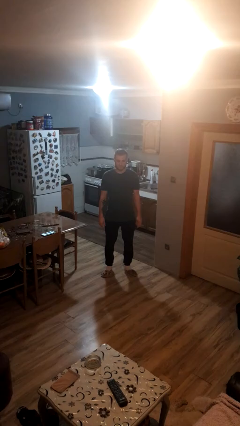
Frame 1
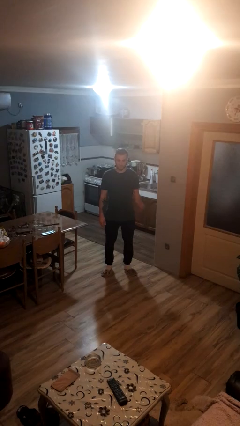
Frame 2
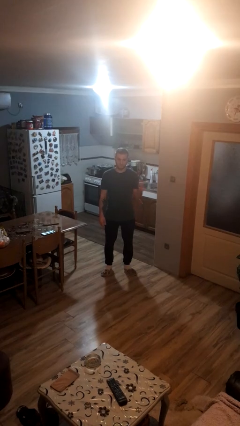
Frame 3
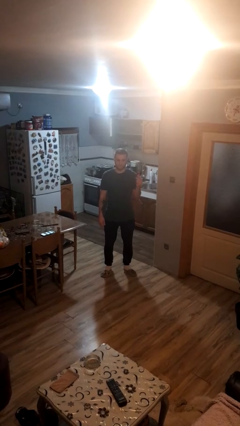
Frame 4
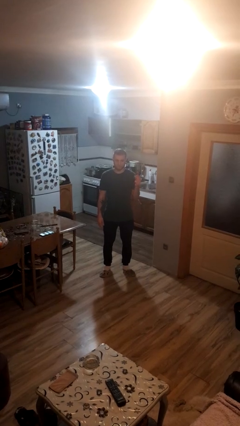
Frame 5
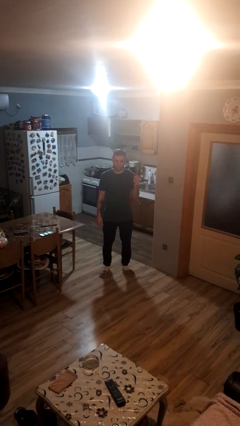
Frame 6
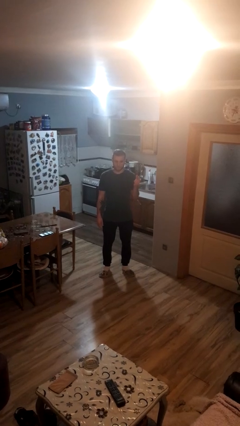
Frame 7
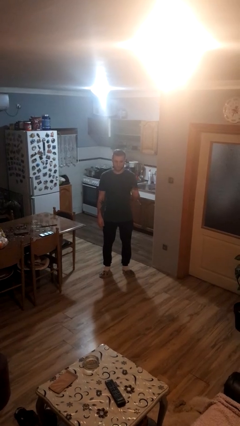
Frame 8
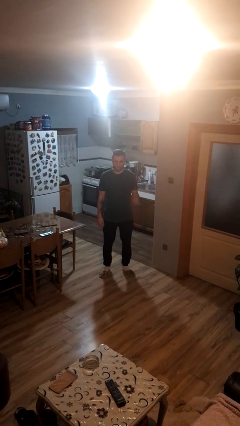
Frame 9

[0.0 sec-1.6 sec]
person snaps fingers

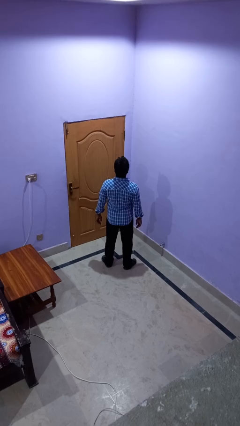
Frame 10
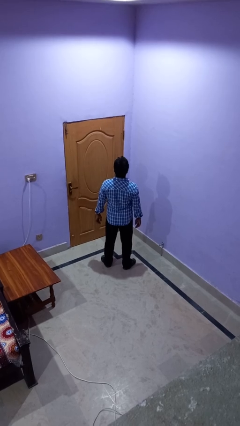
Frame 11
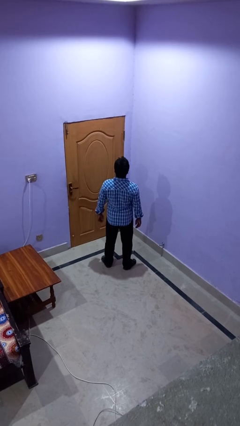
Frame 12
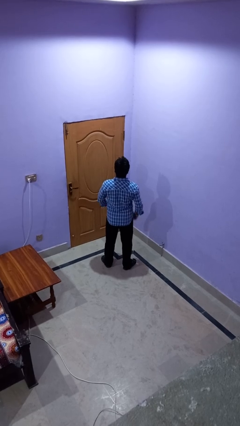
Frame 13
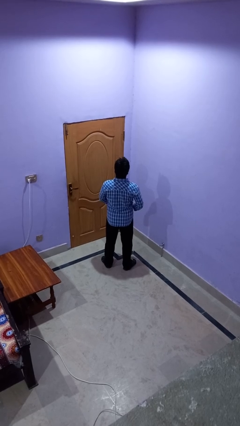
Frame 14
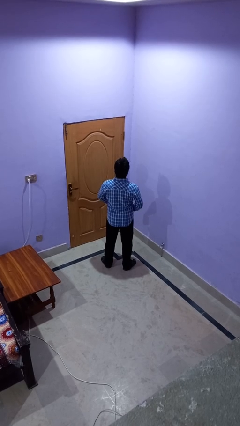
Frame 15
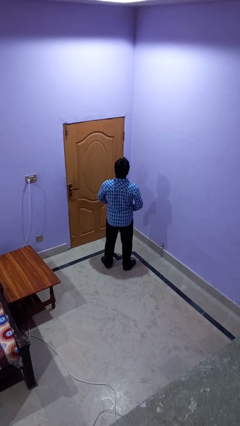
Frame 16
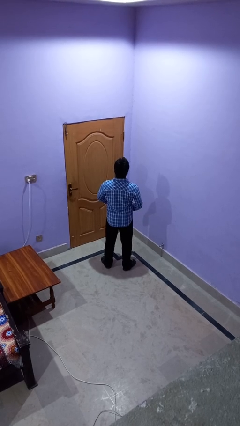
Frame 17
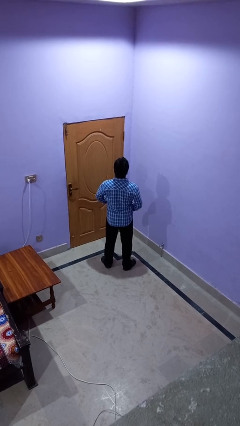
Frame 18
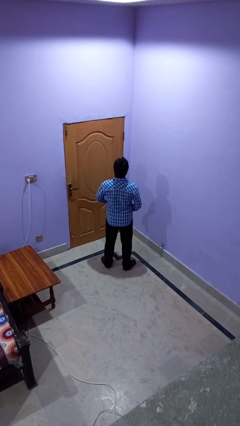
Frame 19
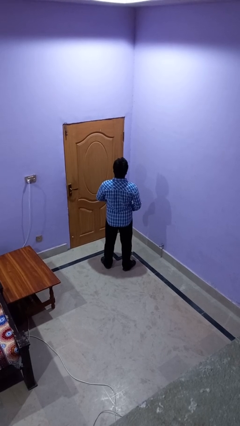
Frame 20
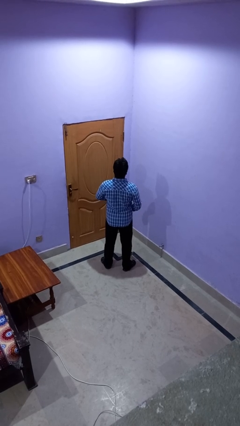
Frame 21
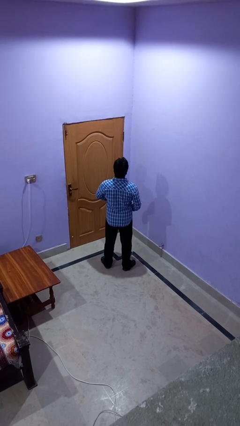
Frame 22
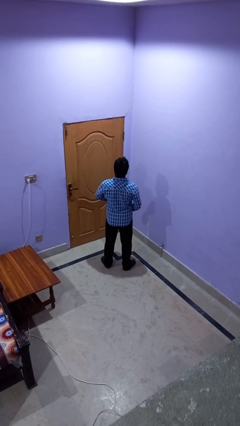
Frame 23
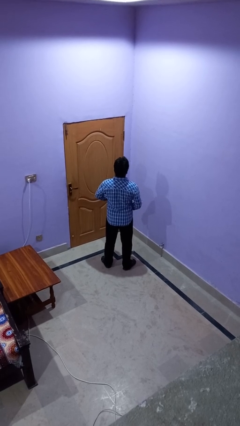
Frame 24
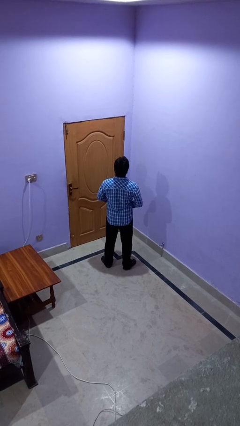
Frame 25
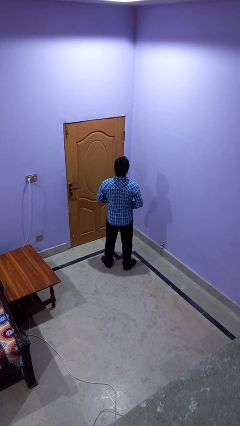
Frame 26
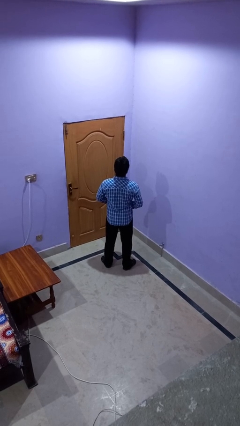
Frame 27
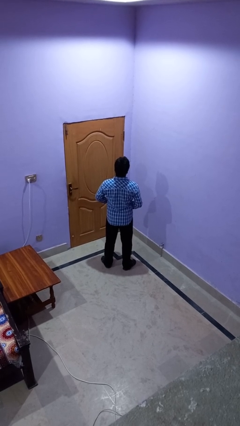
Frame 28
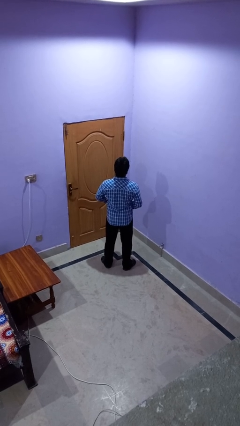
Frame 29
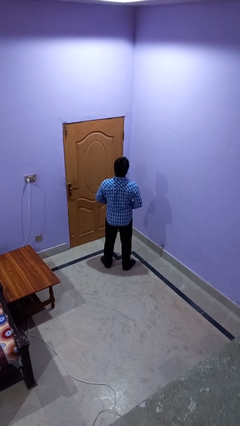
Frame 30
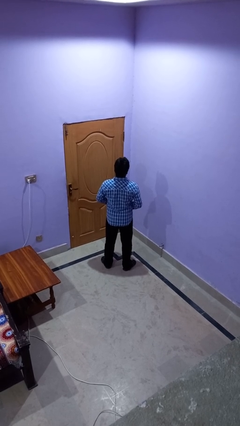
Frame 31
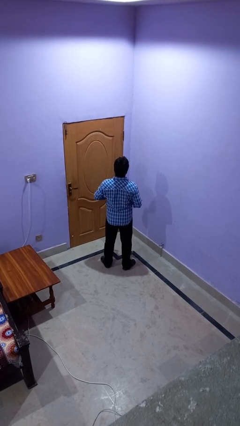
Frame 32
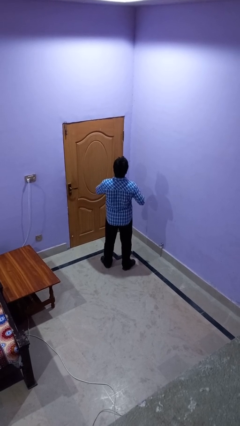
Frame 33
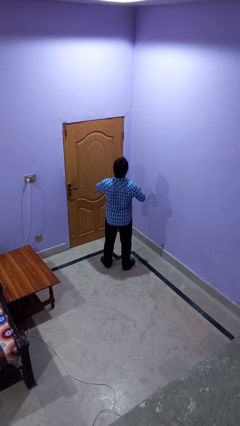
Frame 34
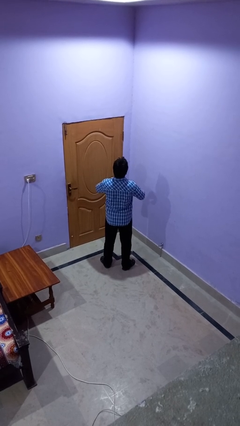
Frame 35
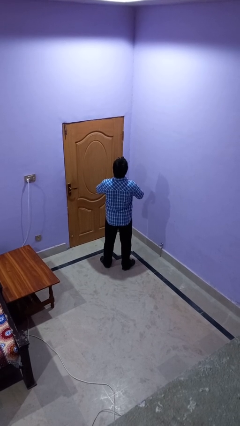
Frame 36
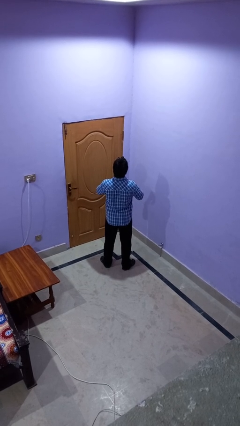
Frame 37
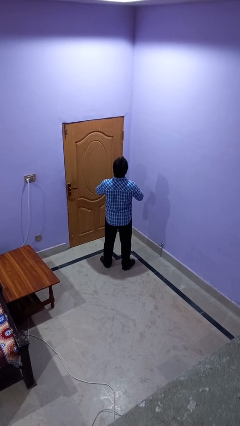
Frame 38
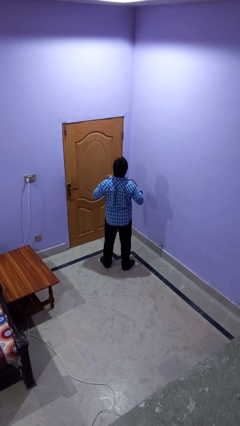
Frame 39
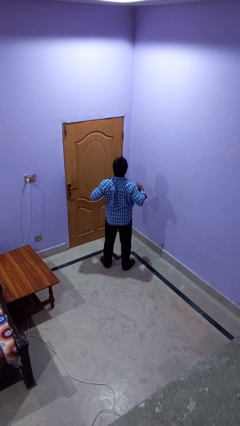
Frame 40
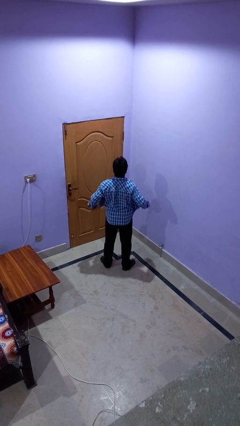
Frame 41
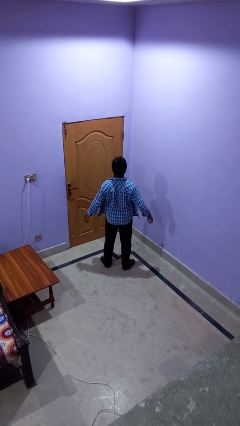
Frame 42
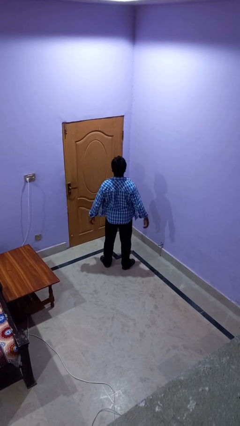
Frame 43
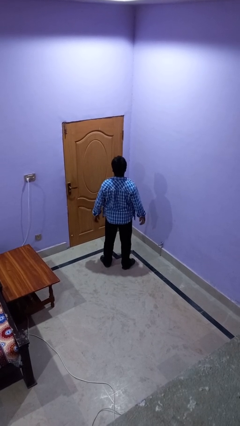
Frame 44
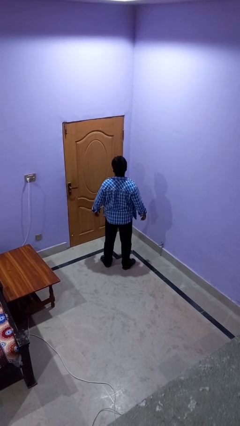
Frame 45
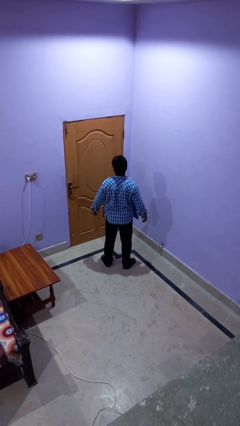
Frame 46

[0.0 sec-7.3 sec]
person unbuttons shirt

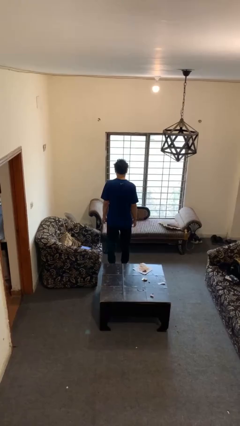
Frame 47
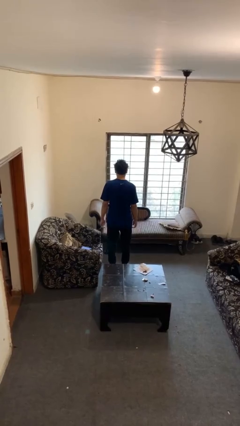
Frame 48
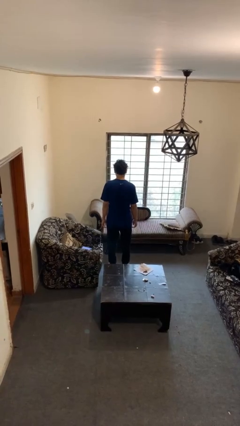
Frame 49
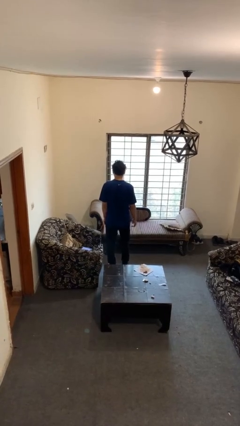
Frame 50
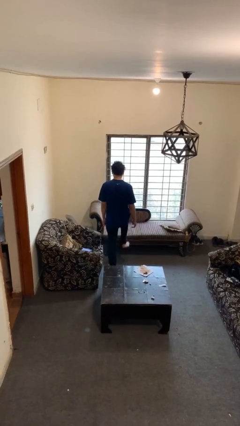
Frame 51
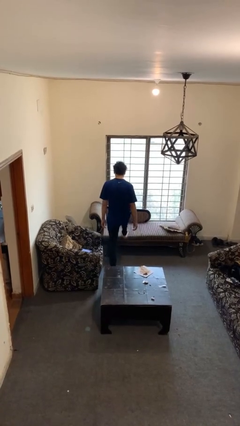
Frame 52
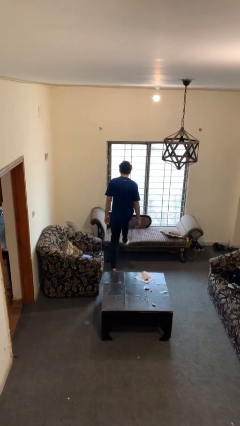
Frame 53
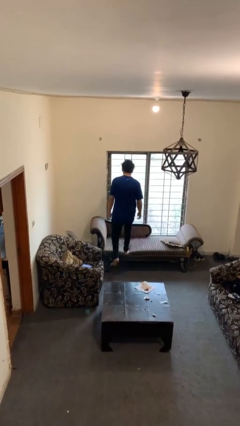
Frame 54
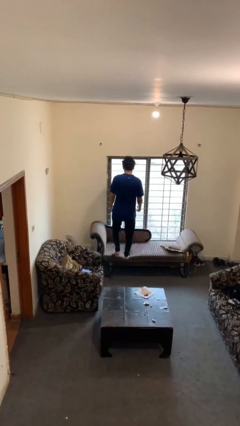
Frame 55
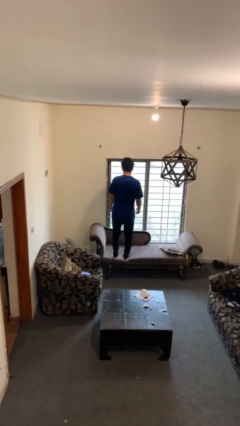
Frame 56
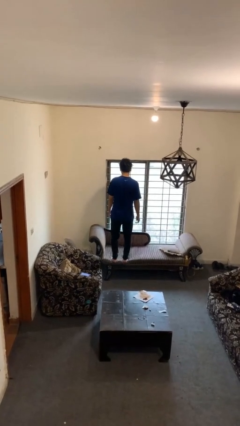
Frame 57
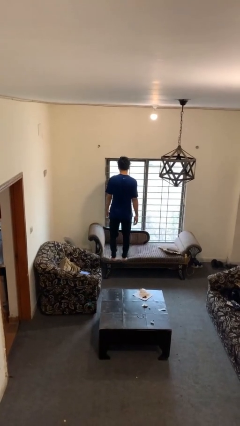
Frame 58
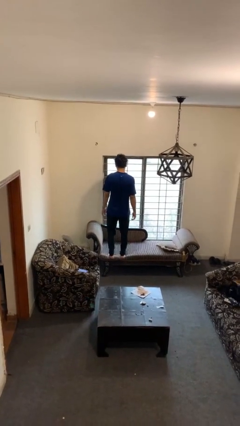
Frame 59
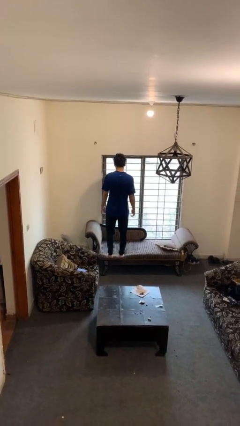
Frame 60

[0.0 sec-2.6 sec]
person climbs on couch

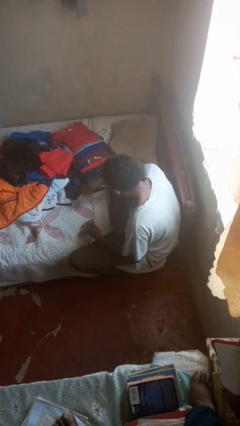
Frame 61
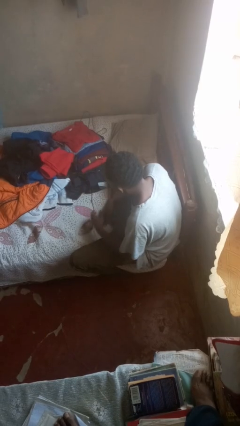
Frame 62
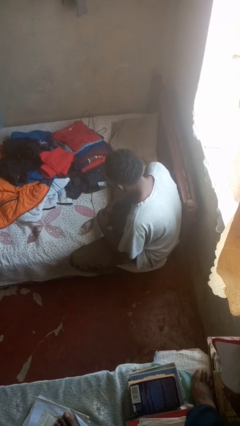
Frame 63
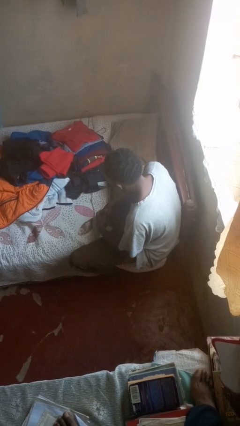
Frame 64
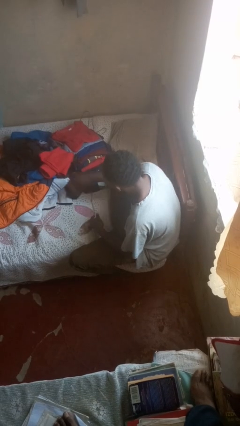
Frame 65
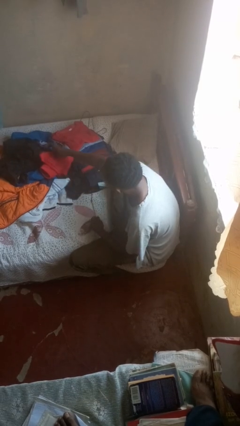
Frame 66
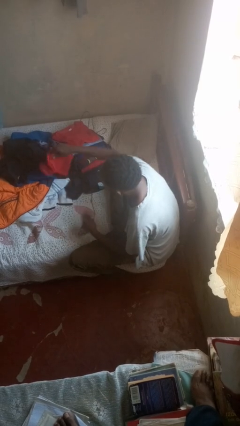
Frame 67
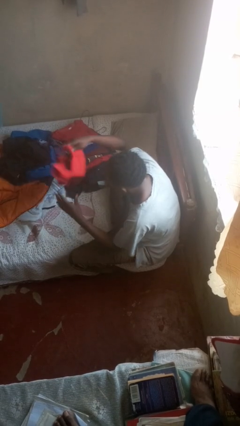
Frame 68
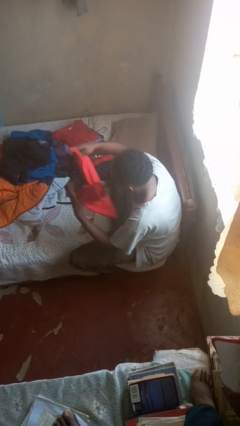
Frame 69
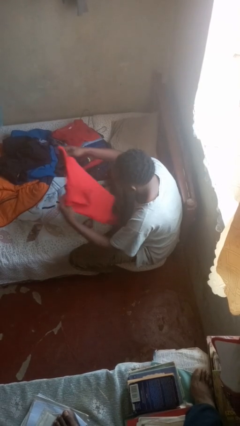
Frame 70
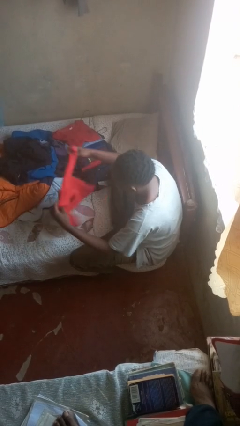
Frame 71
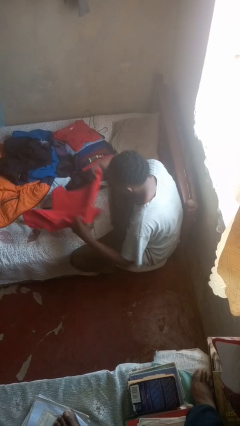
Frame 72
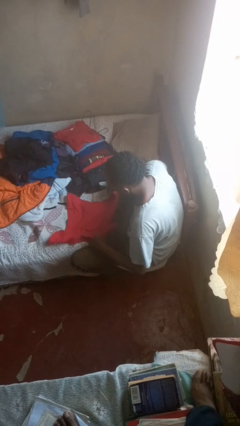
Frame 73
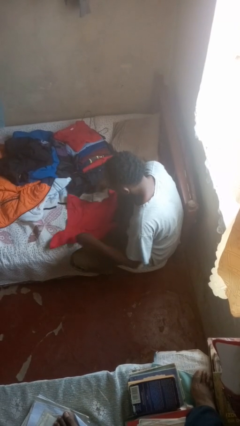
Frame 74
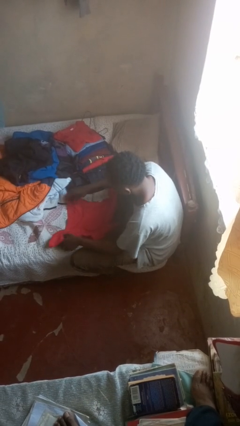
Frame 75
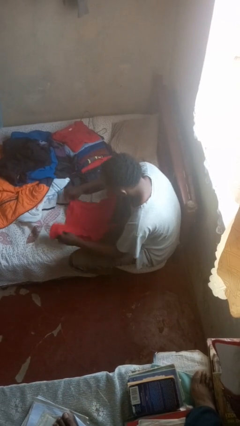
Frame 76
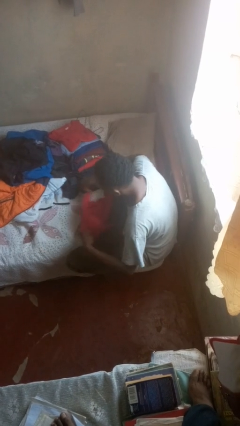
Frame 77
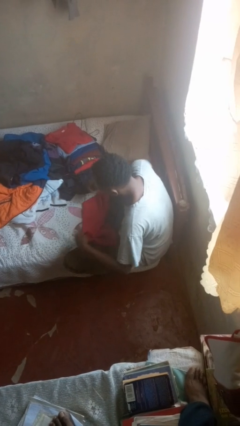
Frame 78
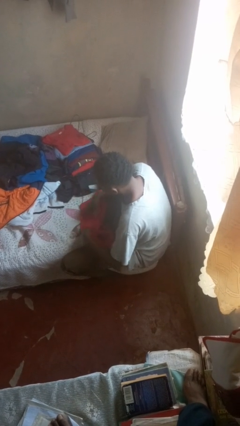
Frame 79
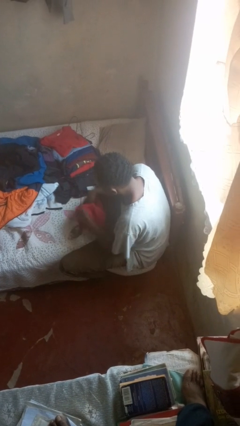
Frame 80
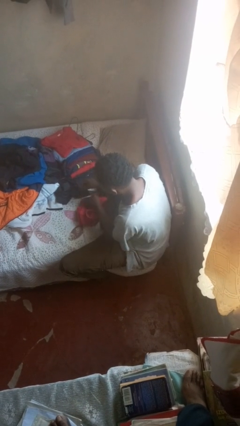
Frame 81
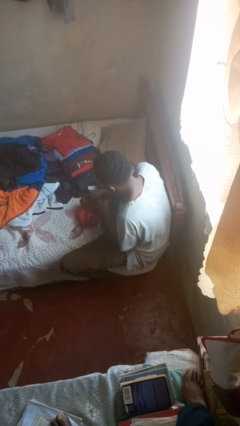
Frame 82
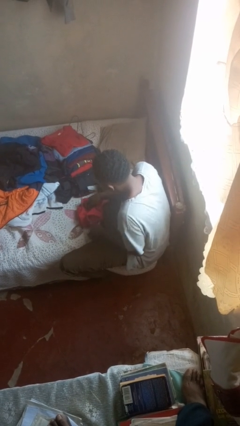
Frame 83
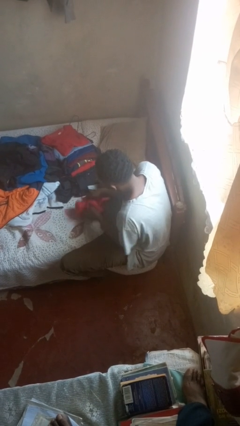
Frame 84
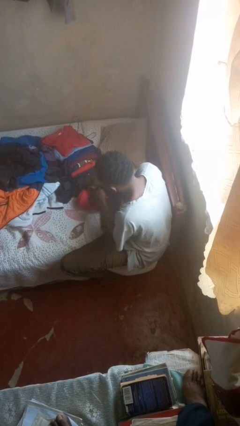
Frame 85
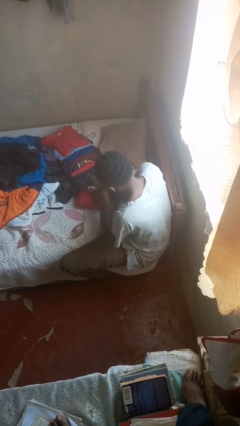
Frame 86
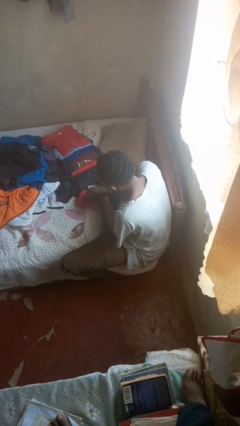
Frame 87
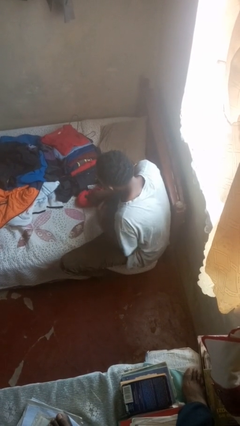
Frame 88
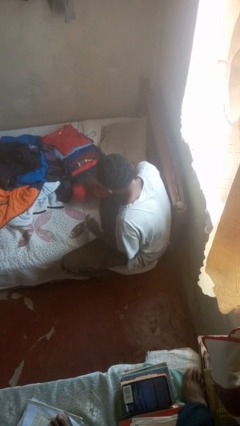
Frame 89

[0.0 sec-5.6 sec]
person folds shirt

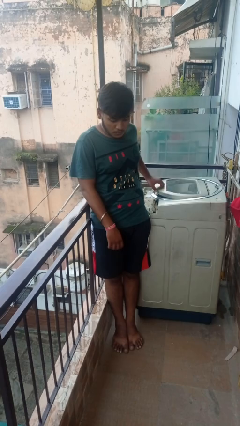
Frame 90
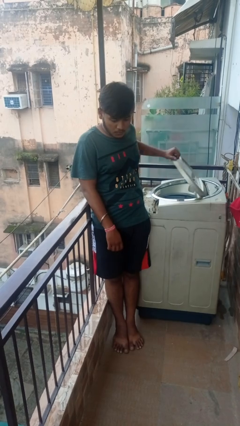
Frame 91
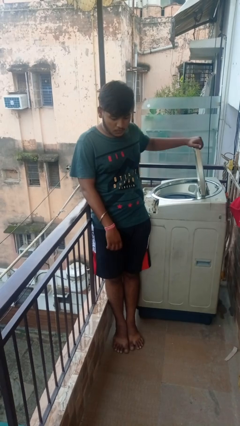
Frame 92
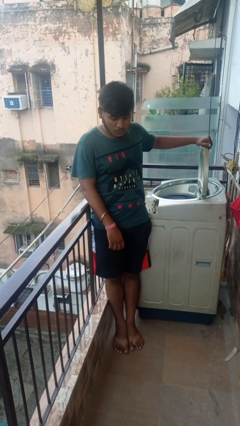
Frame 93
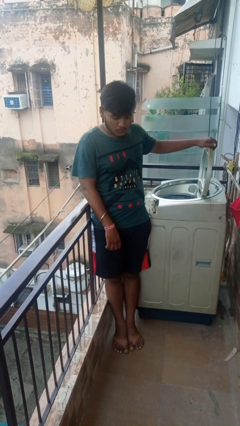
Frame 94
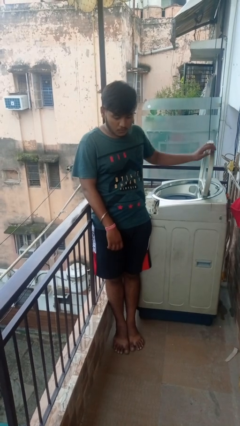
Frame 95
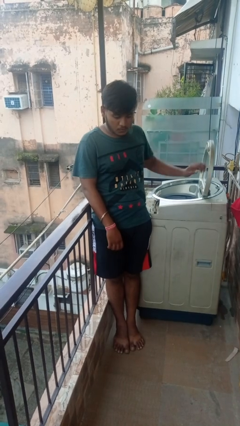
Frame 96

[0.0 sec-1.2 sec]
person opens clothes washer
